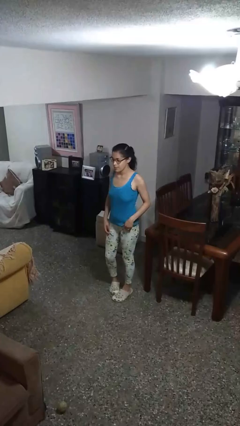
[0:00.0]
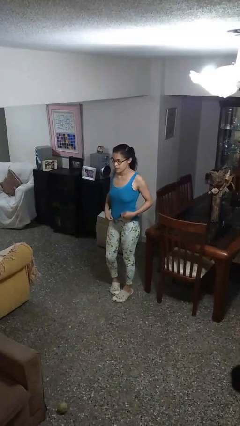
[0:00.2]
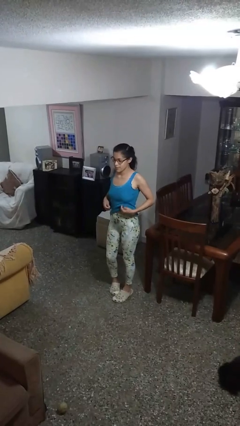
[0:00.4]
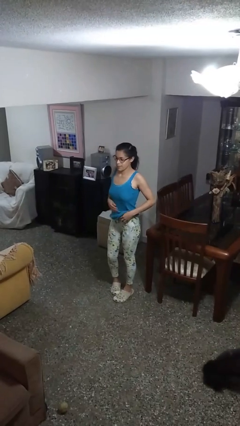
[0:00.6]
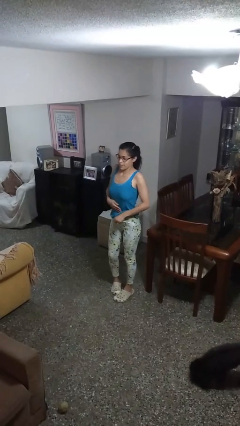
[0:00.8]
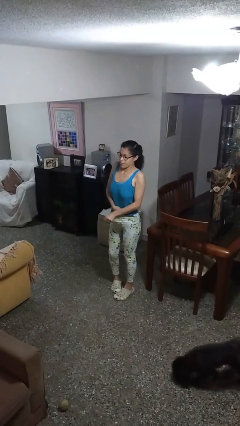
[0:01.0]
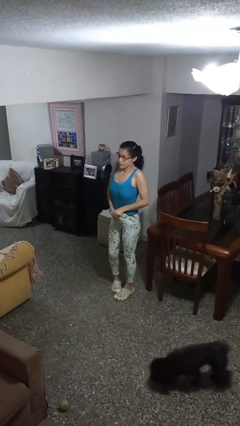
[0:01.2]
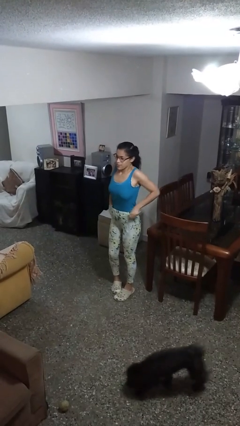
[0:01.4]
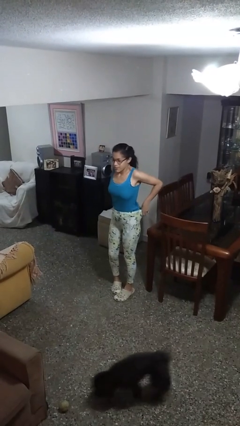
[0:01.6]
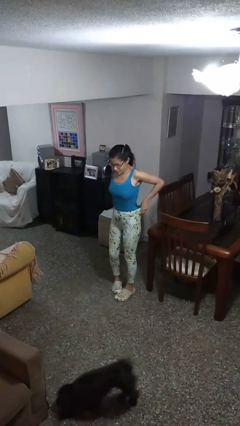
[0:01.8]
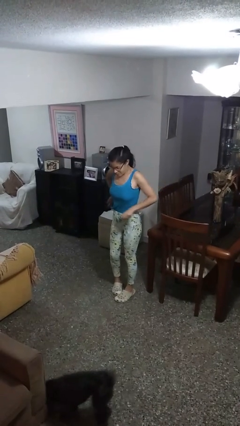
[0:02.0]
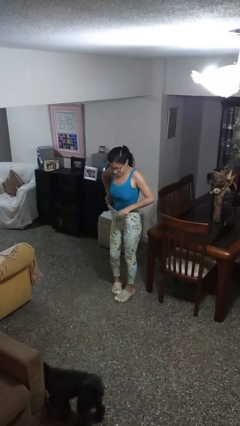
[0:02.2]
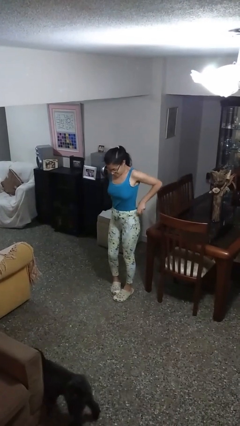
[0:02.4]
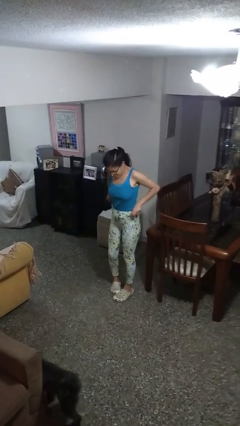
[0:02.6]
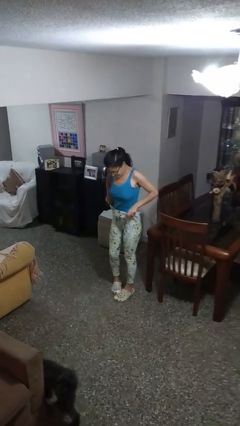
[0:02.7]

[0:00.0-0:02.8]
person tucks in shirt

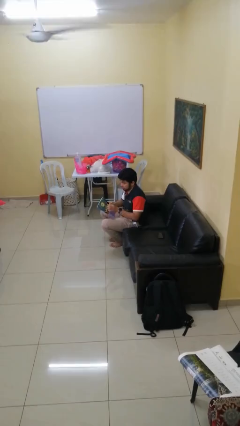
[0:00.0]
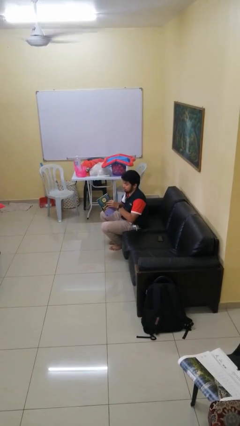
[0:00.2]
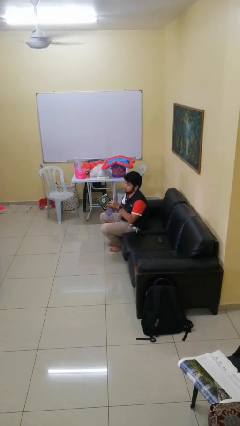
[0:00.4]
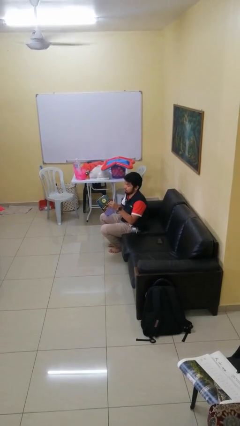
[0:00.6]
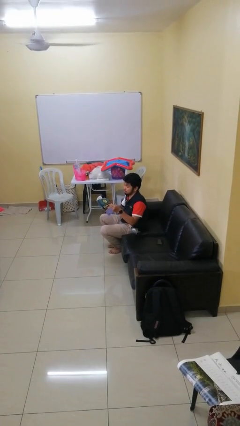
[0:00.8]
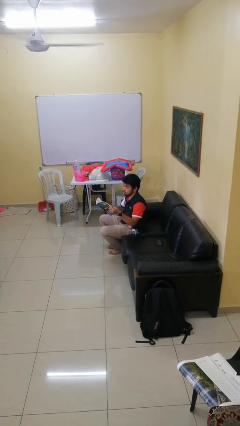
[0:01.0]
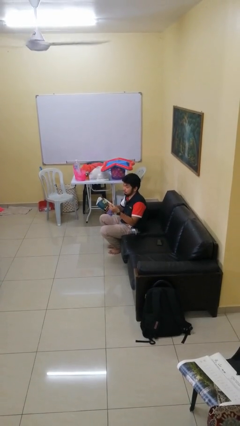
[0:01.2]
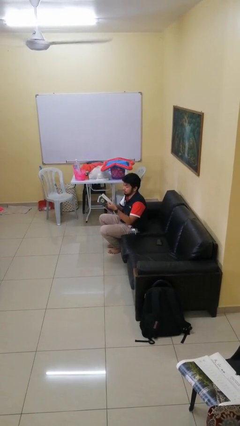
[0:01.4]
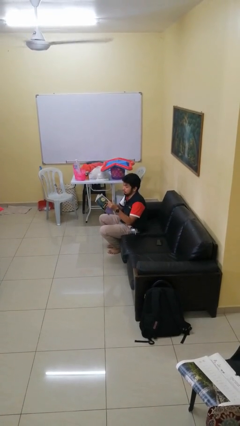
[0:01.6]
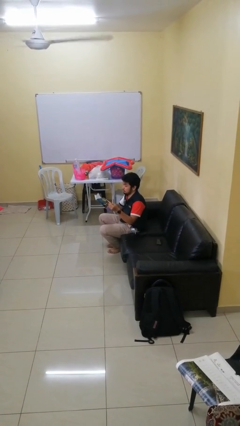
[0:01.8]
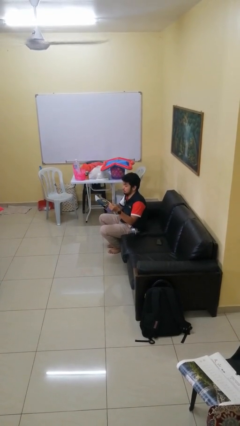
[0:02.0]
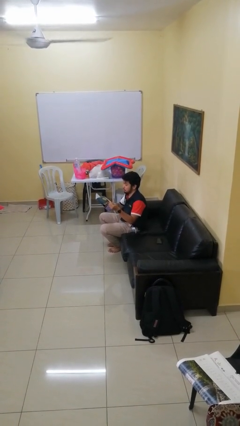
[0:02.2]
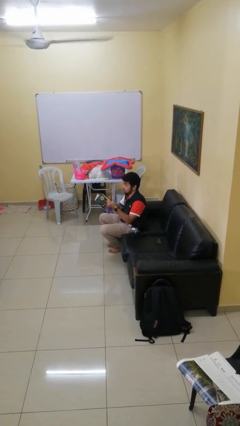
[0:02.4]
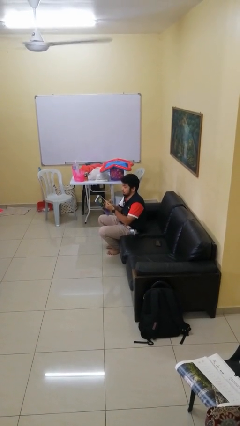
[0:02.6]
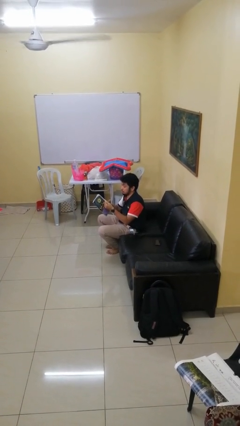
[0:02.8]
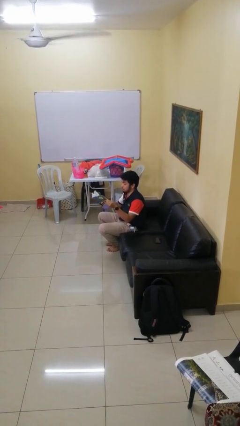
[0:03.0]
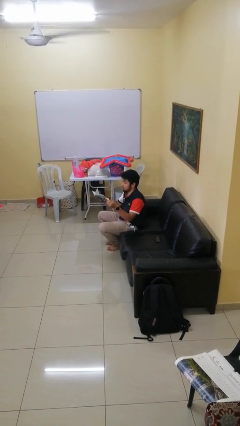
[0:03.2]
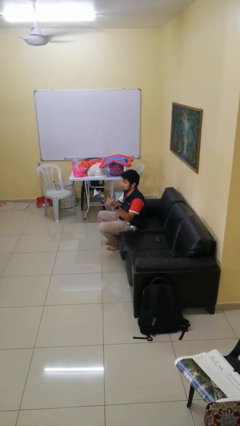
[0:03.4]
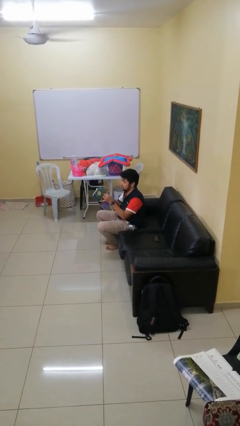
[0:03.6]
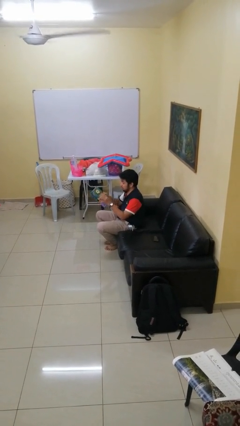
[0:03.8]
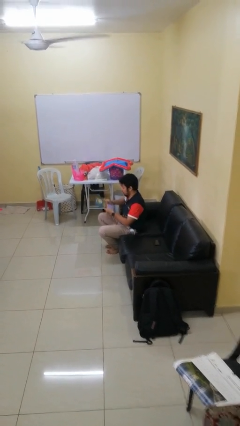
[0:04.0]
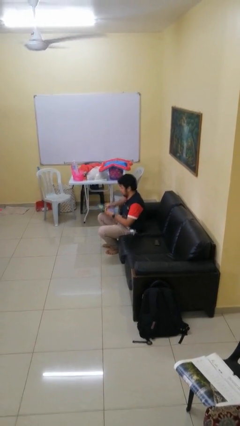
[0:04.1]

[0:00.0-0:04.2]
person reads magazine

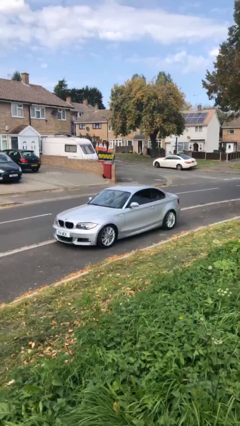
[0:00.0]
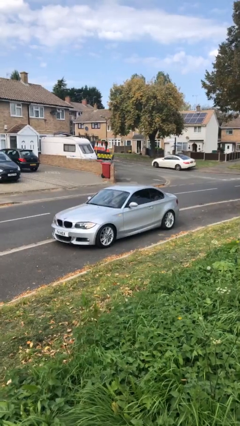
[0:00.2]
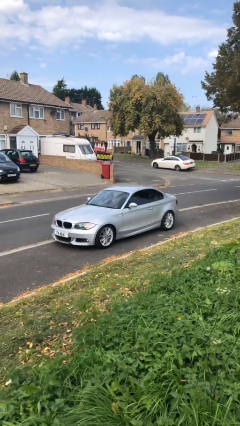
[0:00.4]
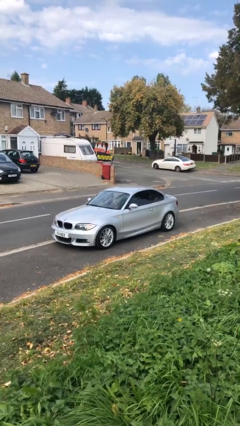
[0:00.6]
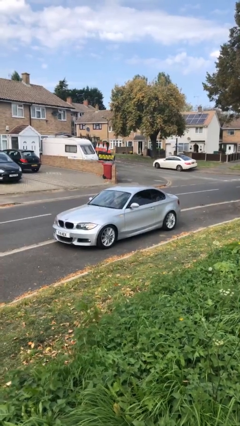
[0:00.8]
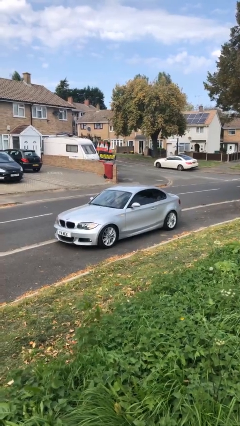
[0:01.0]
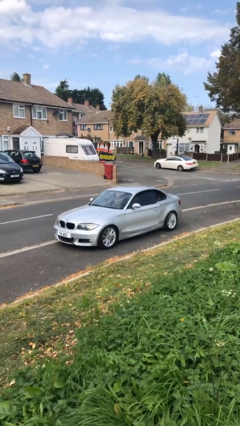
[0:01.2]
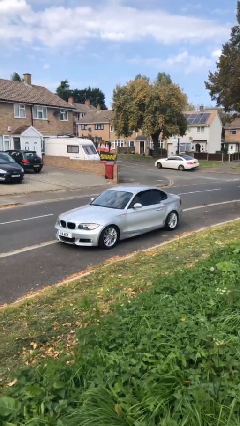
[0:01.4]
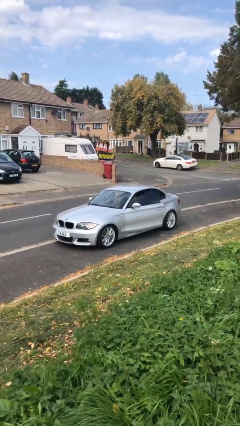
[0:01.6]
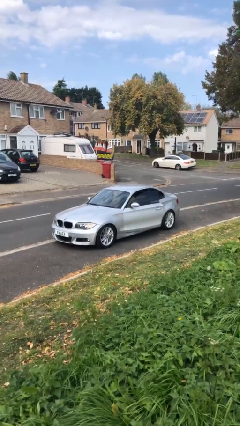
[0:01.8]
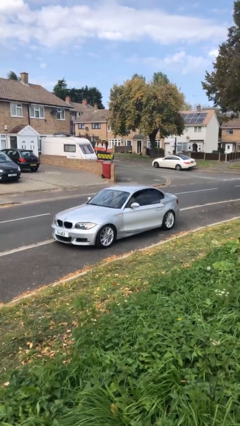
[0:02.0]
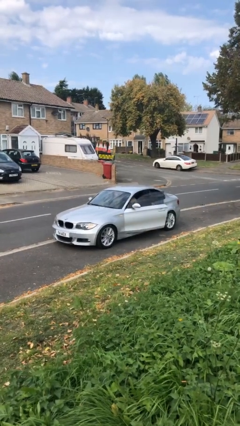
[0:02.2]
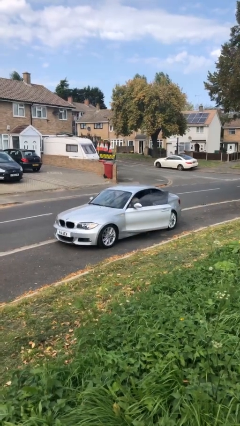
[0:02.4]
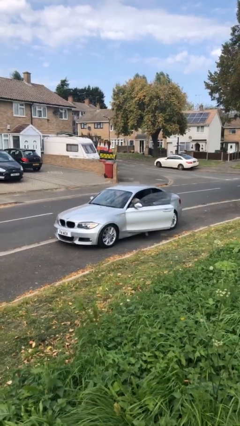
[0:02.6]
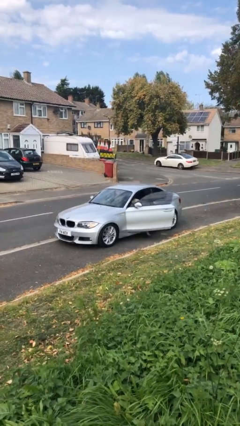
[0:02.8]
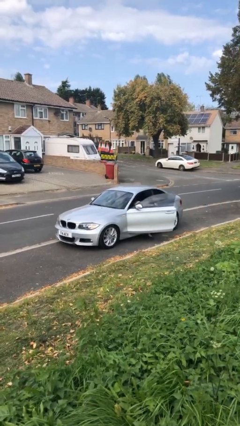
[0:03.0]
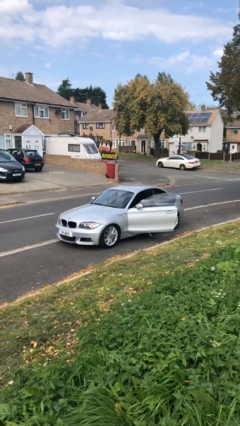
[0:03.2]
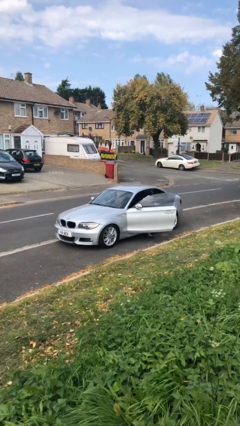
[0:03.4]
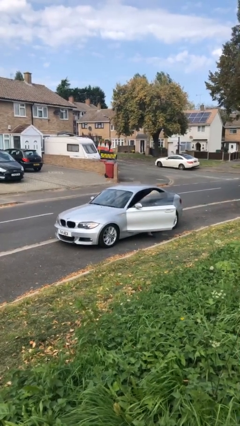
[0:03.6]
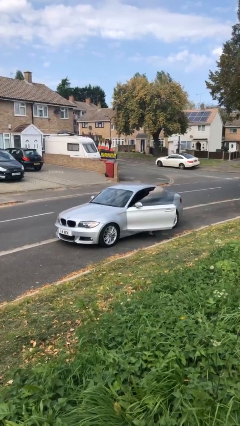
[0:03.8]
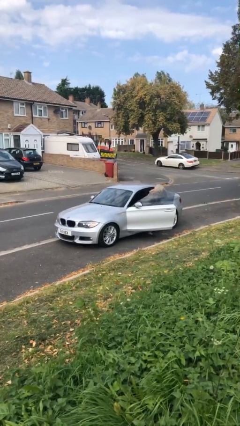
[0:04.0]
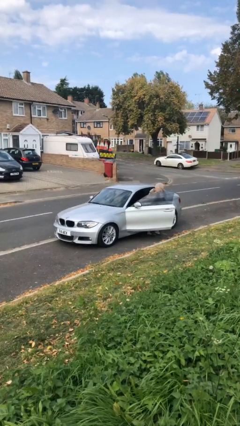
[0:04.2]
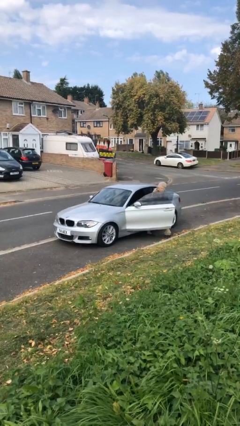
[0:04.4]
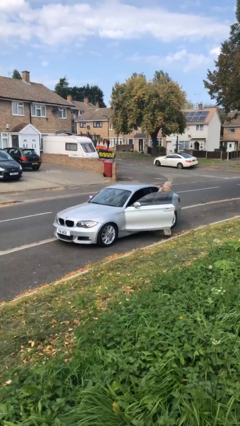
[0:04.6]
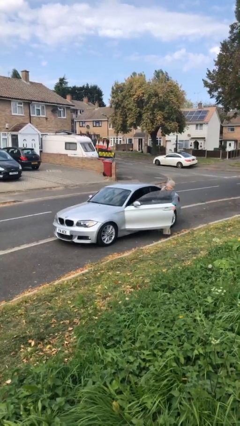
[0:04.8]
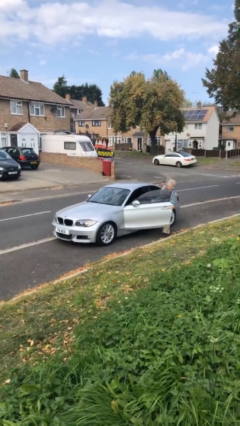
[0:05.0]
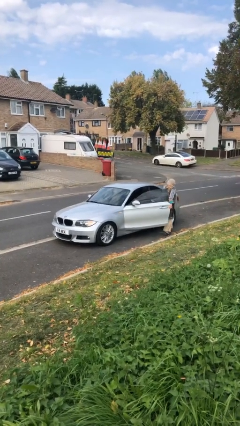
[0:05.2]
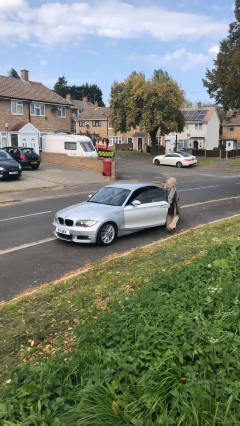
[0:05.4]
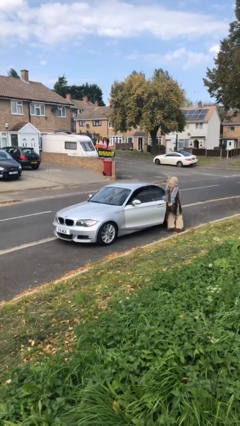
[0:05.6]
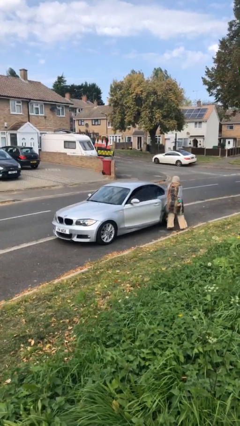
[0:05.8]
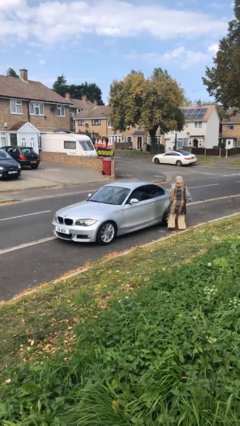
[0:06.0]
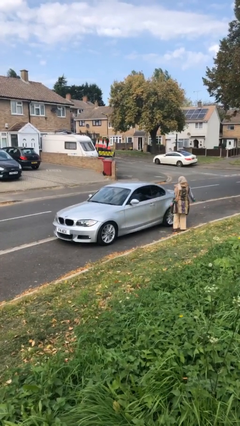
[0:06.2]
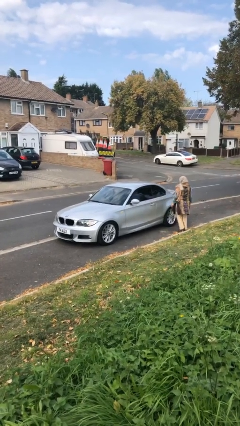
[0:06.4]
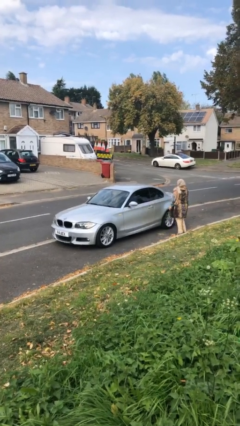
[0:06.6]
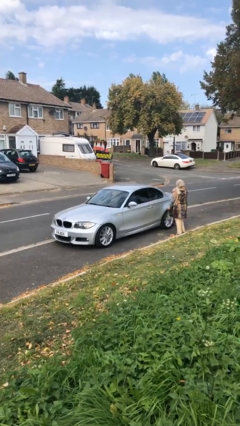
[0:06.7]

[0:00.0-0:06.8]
car drops off person

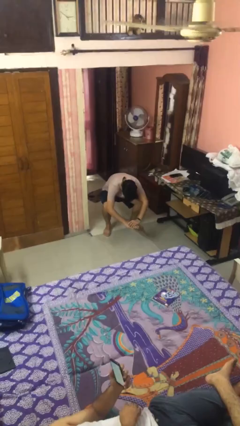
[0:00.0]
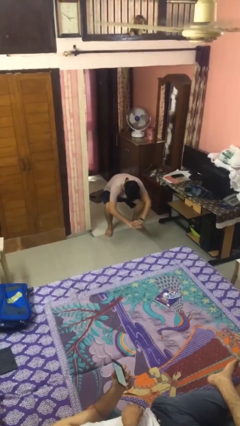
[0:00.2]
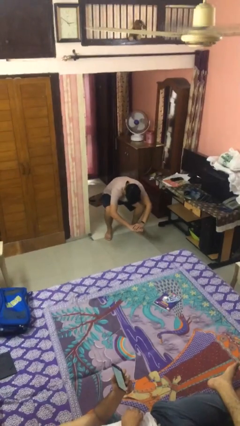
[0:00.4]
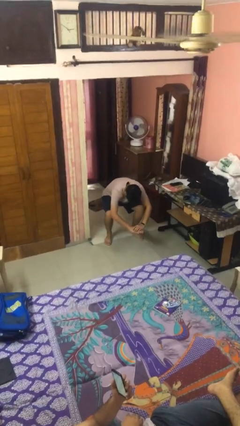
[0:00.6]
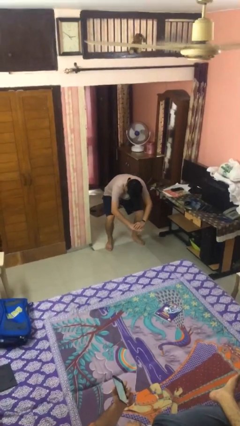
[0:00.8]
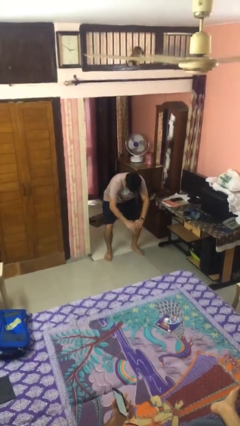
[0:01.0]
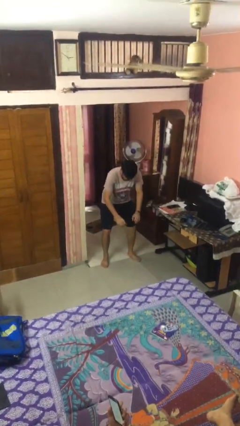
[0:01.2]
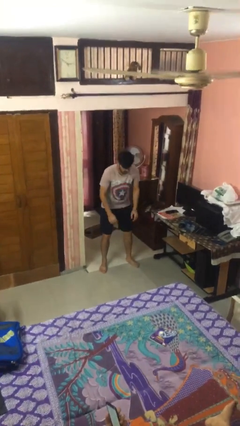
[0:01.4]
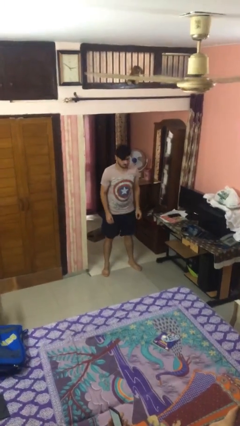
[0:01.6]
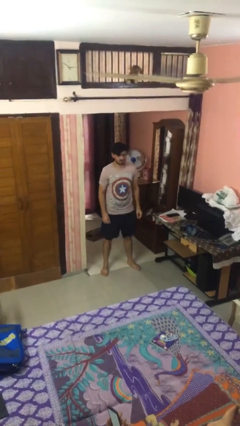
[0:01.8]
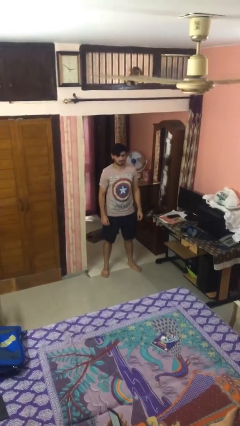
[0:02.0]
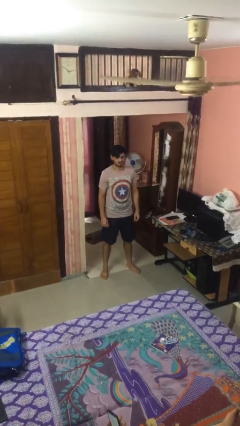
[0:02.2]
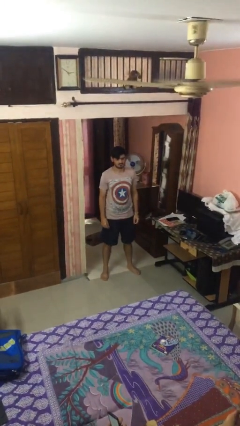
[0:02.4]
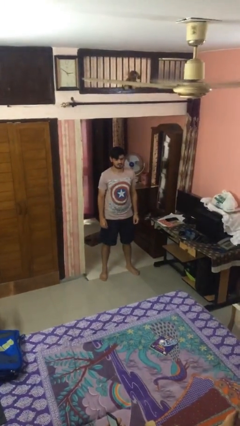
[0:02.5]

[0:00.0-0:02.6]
person stands up

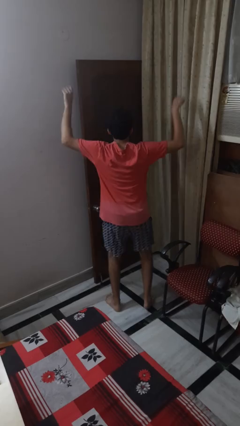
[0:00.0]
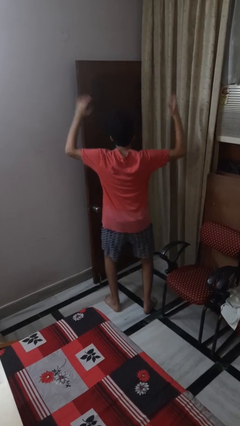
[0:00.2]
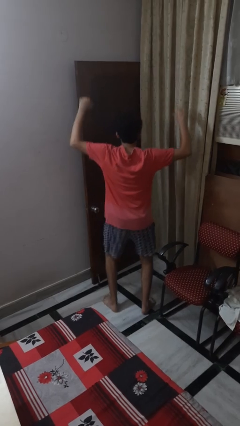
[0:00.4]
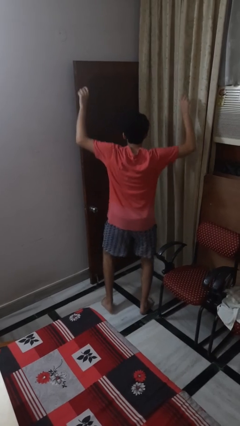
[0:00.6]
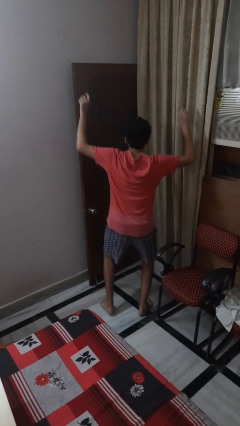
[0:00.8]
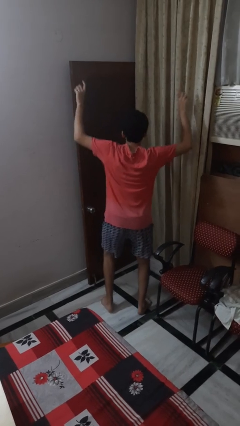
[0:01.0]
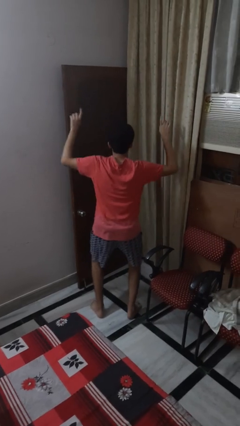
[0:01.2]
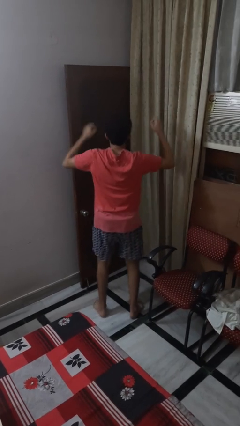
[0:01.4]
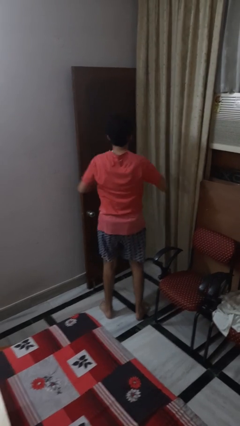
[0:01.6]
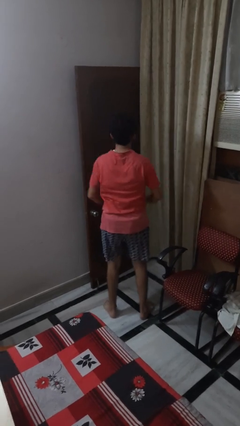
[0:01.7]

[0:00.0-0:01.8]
person dances in place
